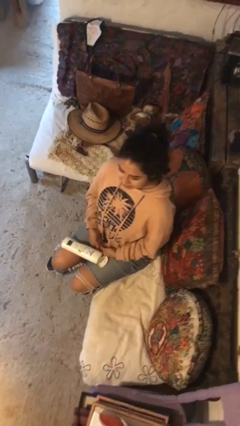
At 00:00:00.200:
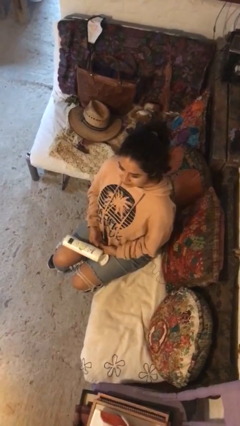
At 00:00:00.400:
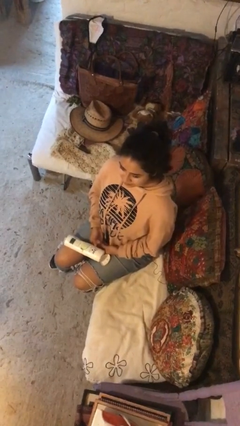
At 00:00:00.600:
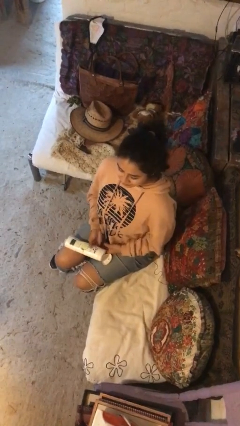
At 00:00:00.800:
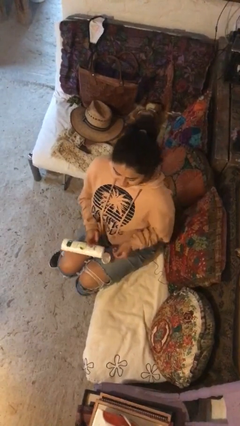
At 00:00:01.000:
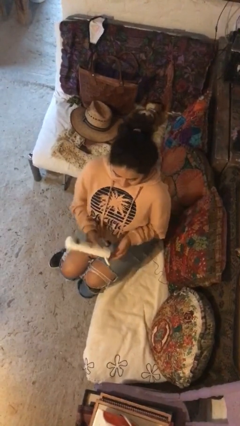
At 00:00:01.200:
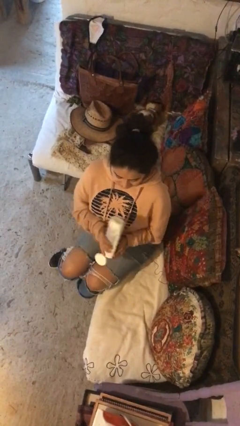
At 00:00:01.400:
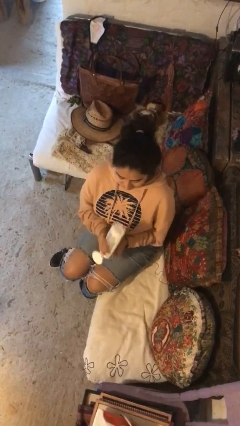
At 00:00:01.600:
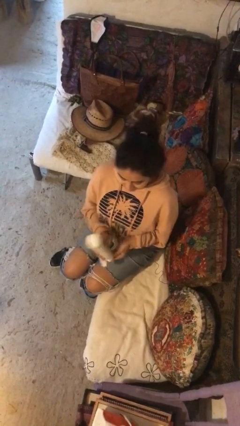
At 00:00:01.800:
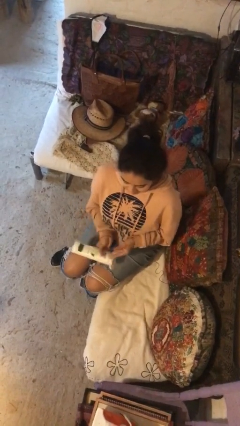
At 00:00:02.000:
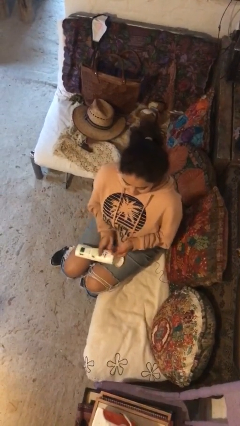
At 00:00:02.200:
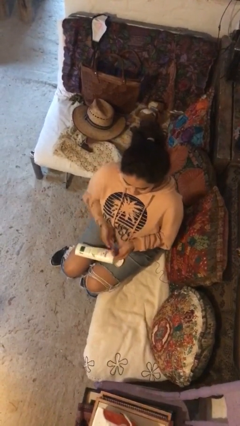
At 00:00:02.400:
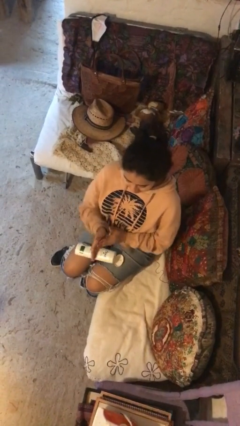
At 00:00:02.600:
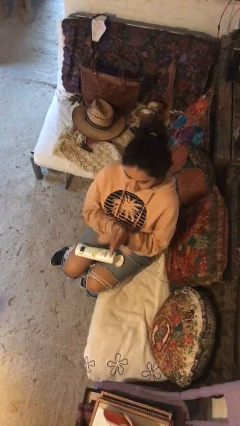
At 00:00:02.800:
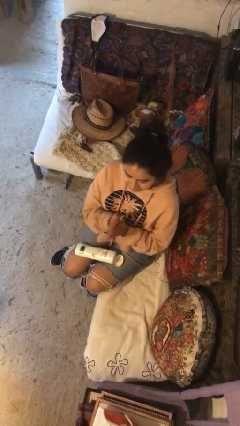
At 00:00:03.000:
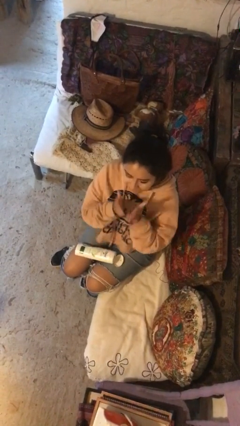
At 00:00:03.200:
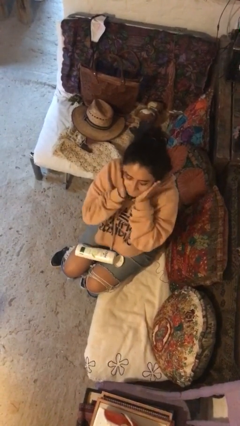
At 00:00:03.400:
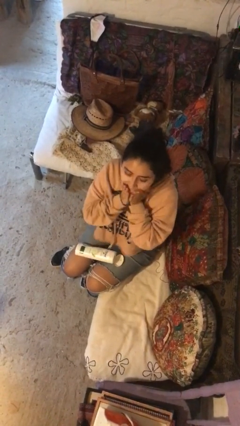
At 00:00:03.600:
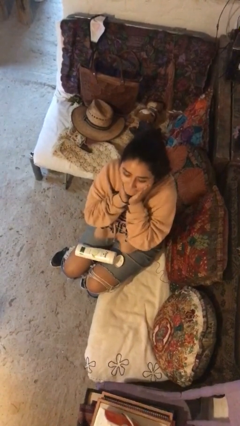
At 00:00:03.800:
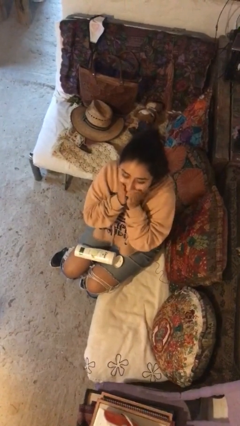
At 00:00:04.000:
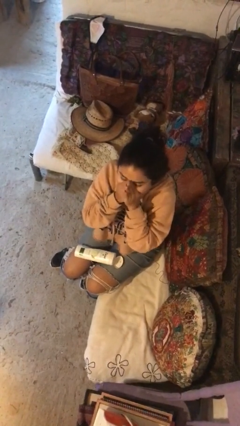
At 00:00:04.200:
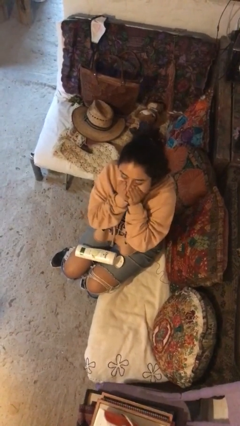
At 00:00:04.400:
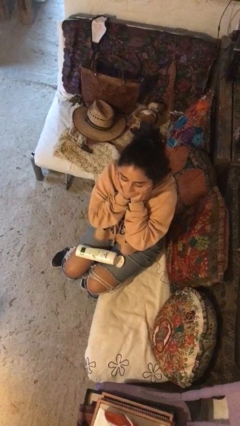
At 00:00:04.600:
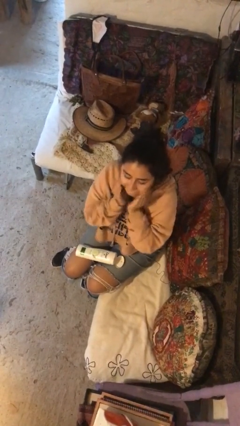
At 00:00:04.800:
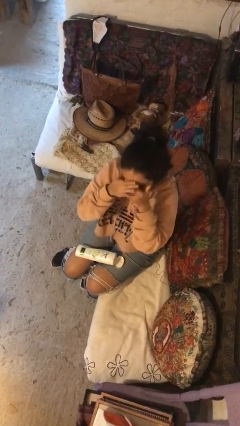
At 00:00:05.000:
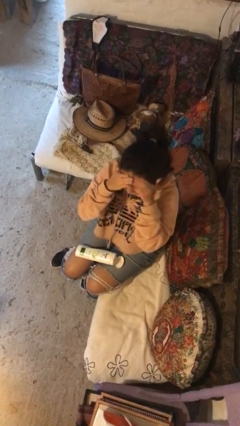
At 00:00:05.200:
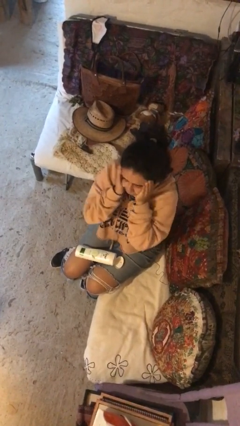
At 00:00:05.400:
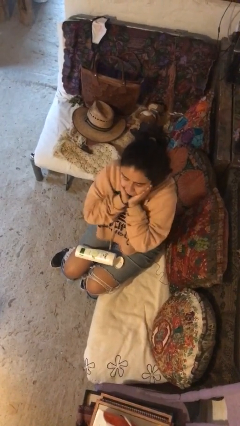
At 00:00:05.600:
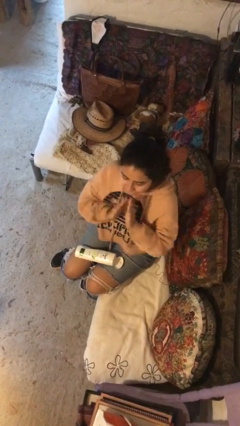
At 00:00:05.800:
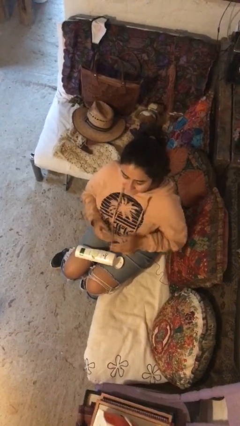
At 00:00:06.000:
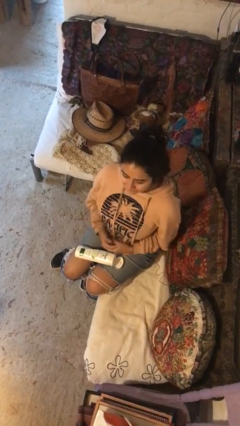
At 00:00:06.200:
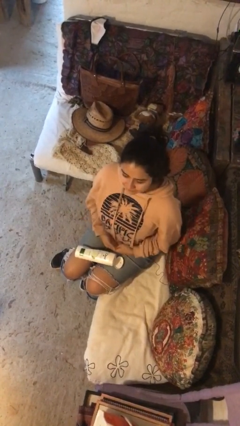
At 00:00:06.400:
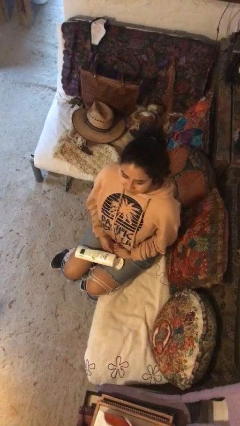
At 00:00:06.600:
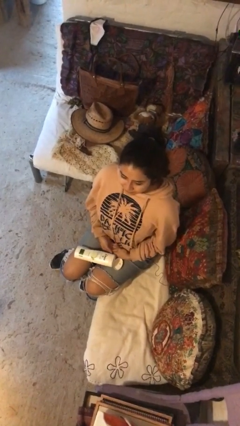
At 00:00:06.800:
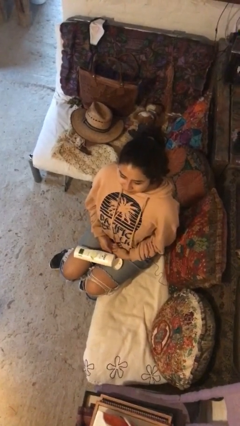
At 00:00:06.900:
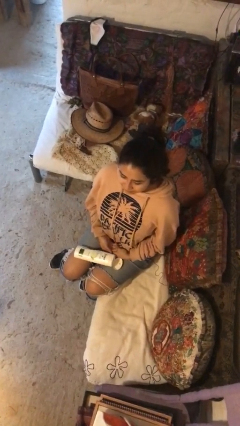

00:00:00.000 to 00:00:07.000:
person applies facial moisturizer

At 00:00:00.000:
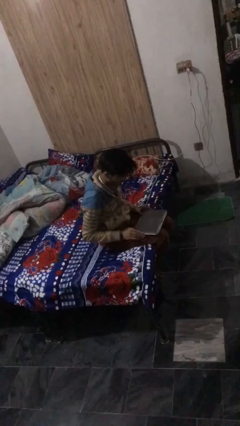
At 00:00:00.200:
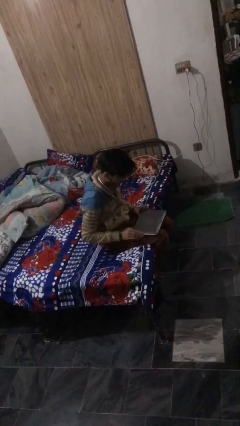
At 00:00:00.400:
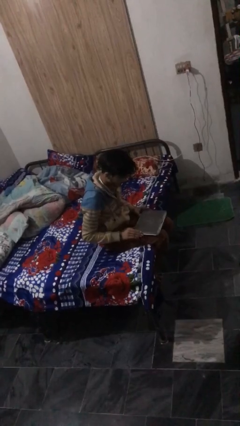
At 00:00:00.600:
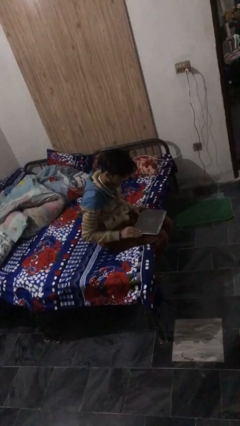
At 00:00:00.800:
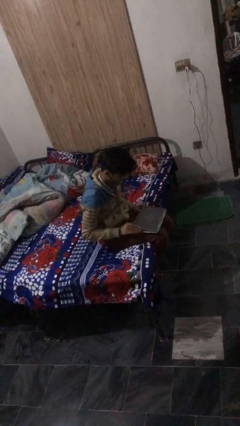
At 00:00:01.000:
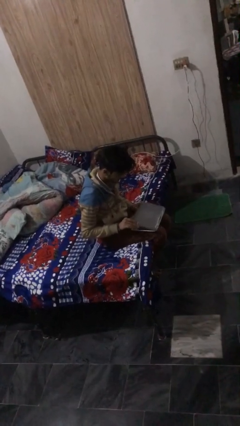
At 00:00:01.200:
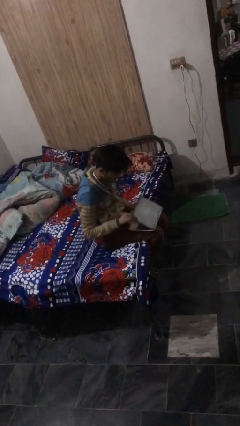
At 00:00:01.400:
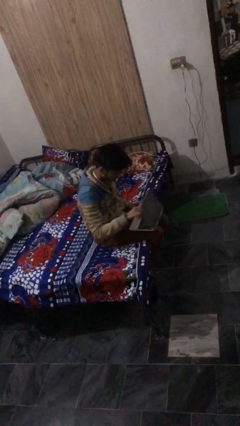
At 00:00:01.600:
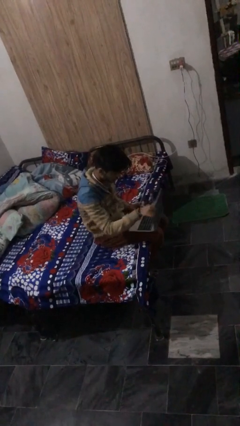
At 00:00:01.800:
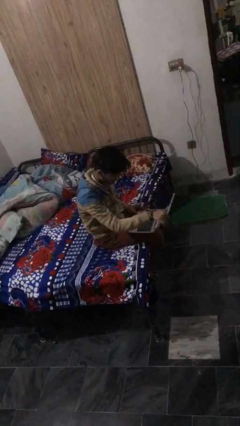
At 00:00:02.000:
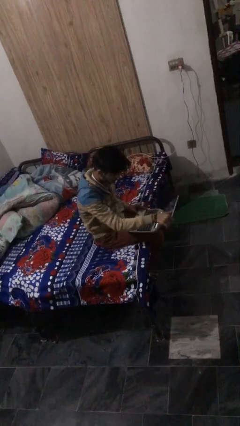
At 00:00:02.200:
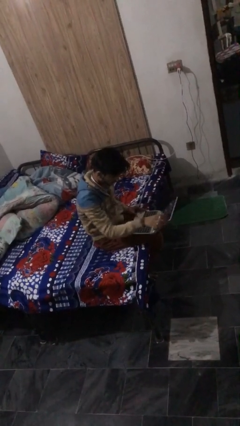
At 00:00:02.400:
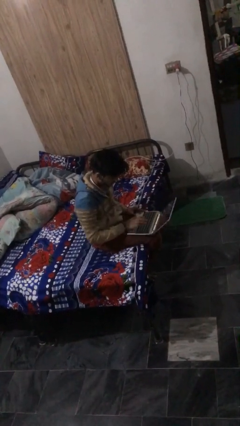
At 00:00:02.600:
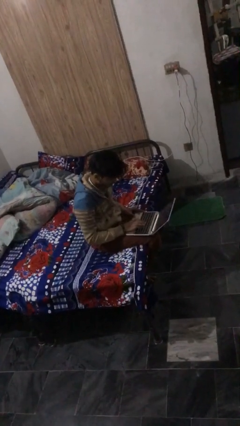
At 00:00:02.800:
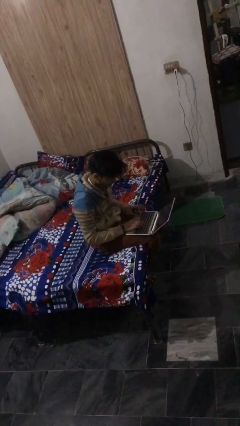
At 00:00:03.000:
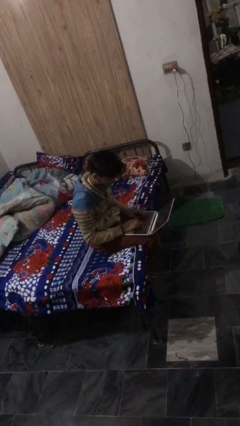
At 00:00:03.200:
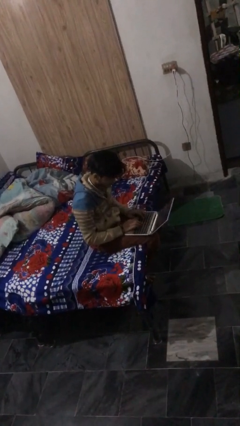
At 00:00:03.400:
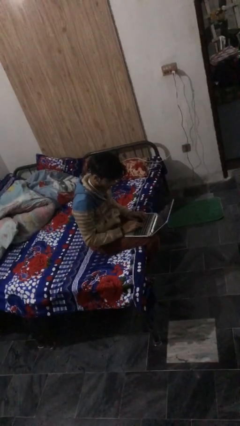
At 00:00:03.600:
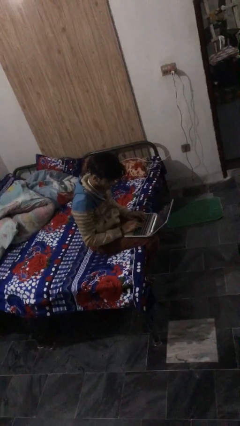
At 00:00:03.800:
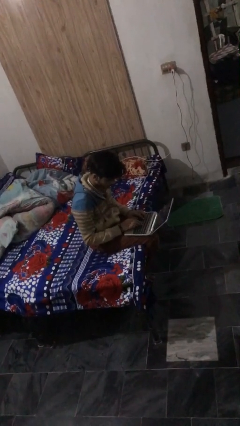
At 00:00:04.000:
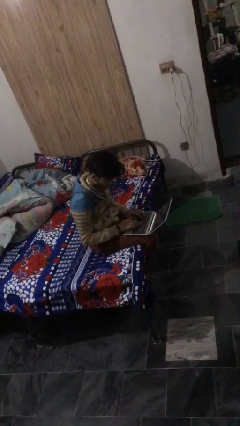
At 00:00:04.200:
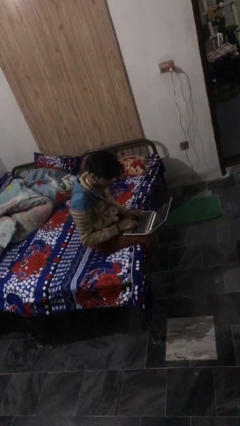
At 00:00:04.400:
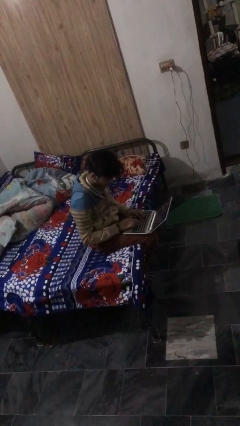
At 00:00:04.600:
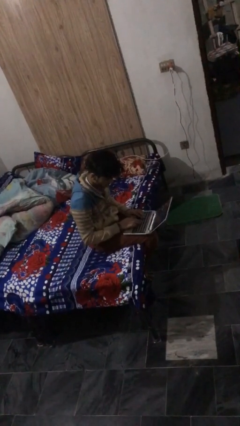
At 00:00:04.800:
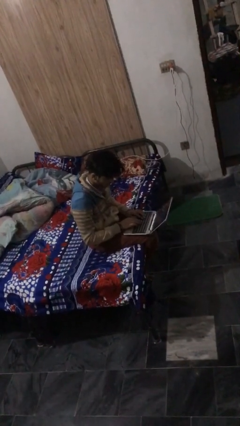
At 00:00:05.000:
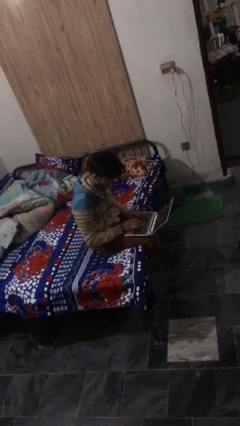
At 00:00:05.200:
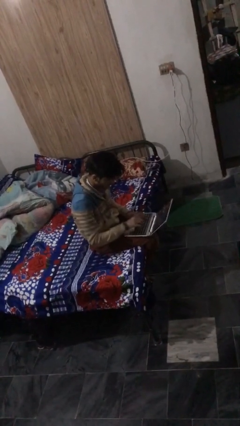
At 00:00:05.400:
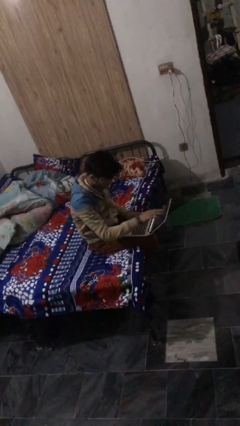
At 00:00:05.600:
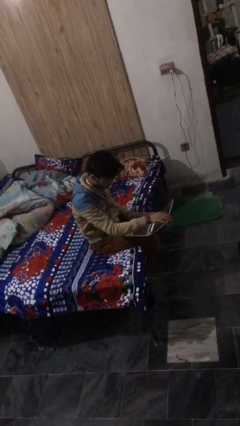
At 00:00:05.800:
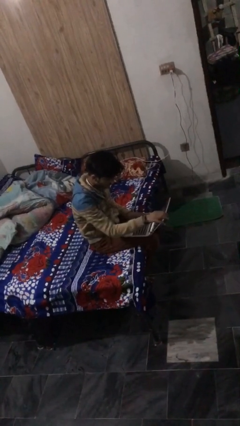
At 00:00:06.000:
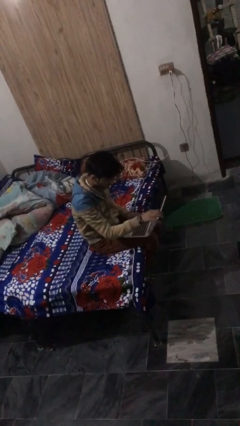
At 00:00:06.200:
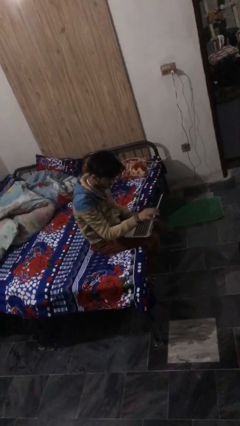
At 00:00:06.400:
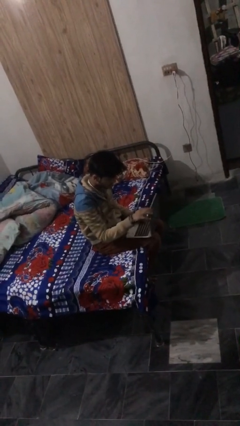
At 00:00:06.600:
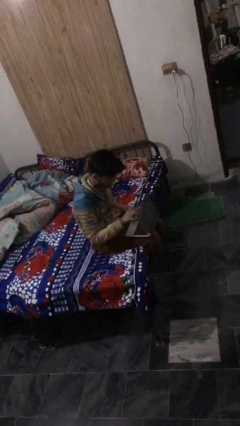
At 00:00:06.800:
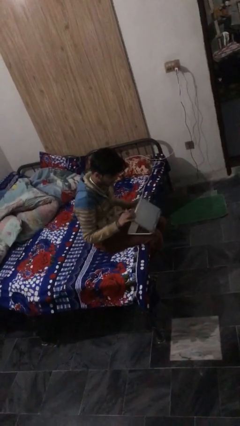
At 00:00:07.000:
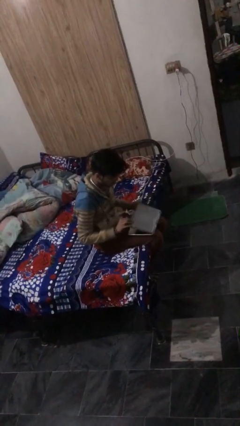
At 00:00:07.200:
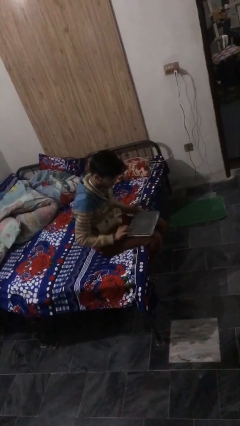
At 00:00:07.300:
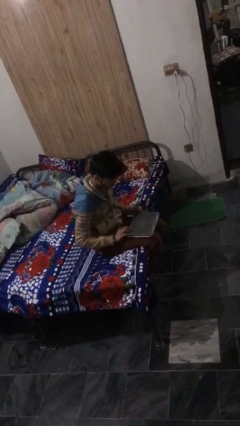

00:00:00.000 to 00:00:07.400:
person interacts with laptop

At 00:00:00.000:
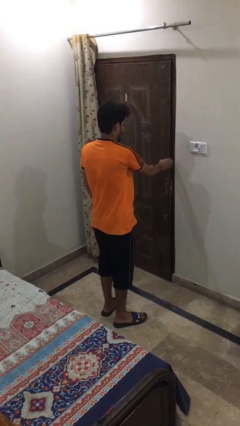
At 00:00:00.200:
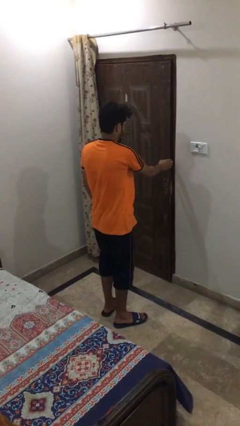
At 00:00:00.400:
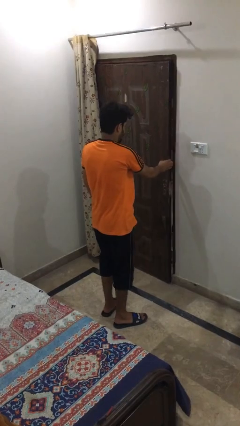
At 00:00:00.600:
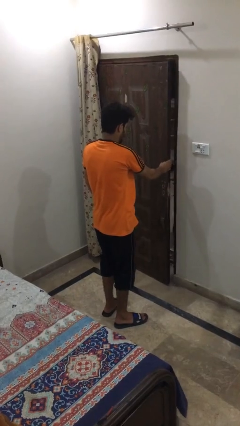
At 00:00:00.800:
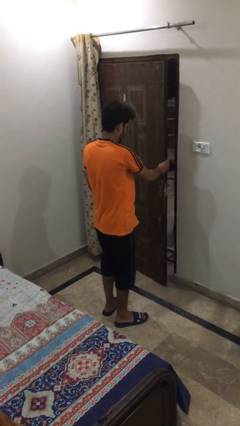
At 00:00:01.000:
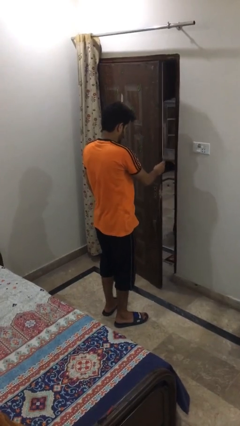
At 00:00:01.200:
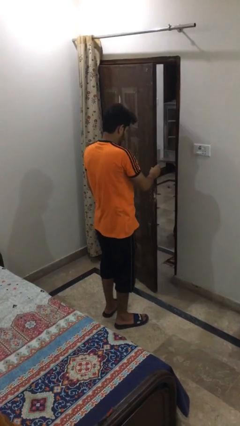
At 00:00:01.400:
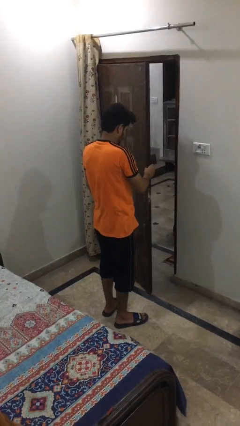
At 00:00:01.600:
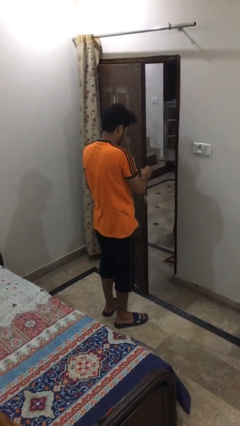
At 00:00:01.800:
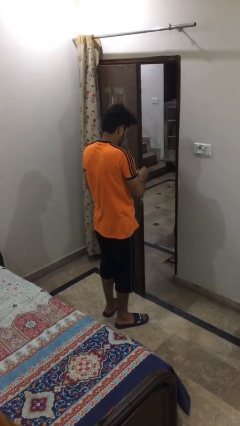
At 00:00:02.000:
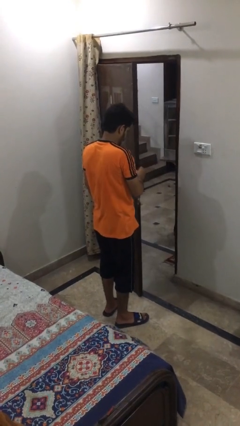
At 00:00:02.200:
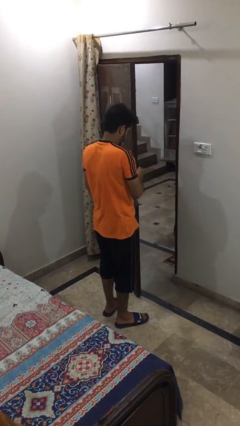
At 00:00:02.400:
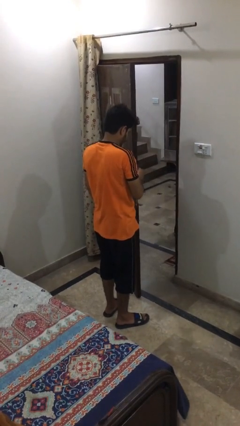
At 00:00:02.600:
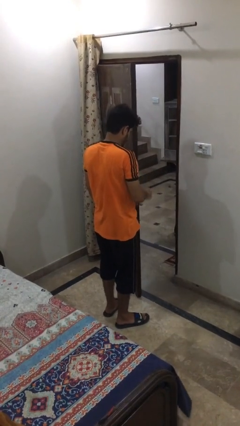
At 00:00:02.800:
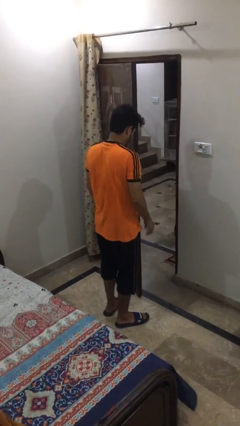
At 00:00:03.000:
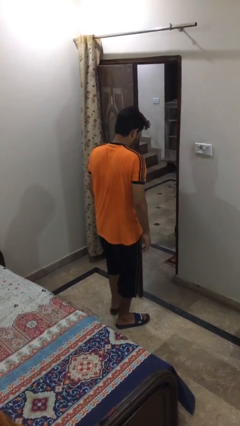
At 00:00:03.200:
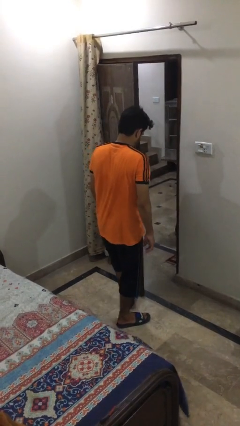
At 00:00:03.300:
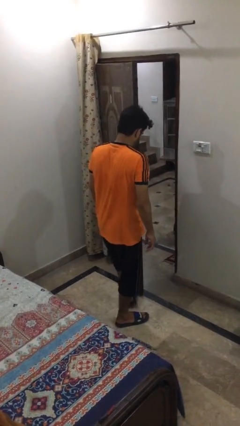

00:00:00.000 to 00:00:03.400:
person opens facility door
